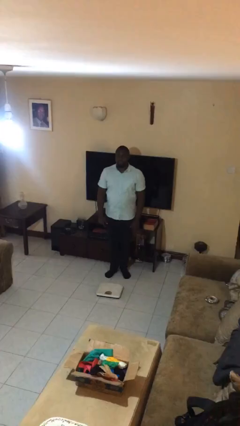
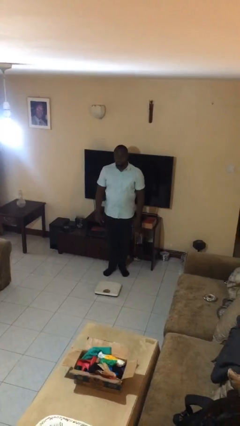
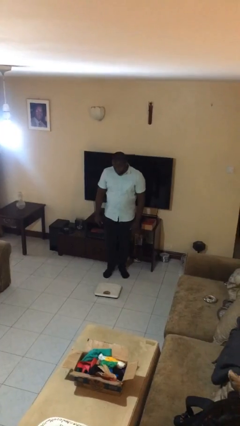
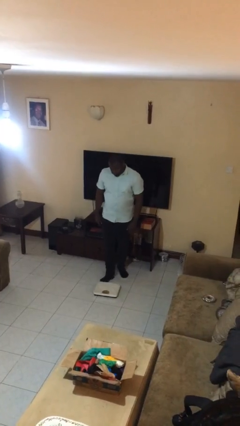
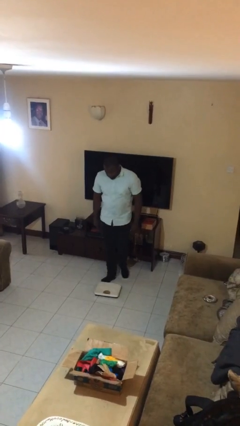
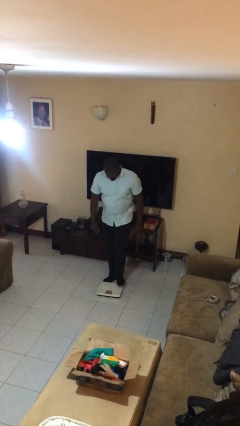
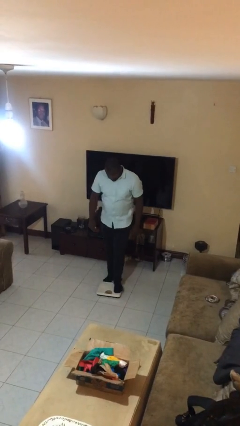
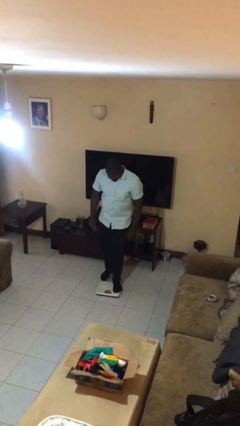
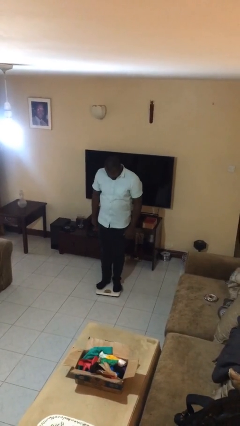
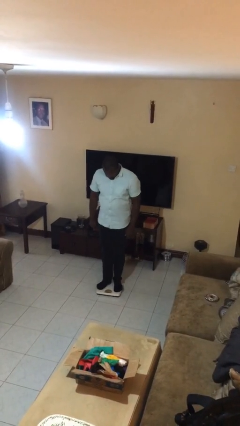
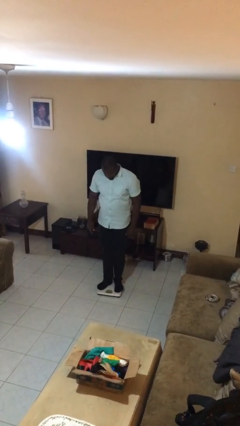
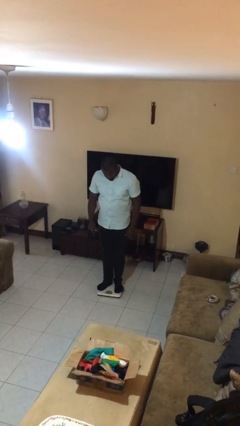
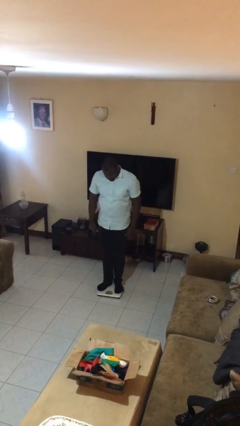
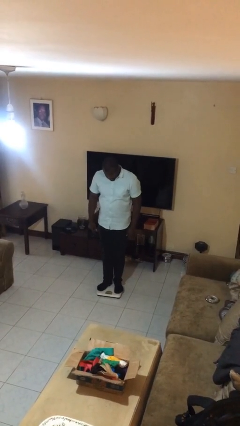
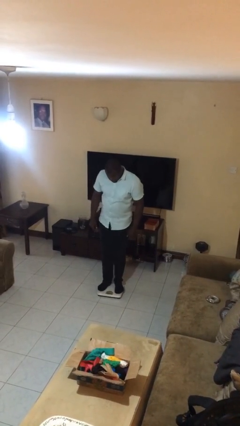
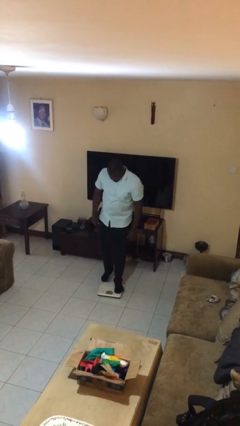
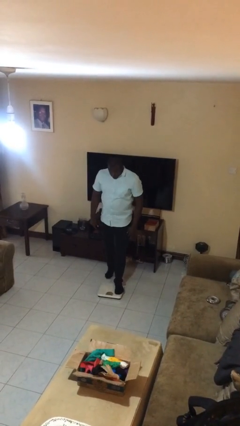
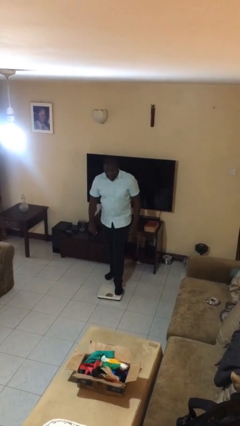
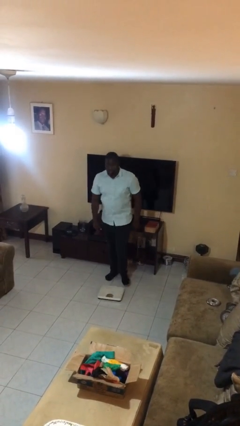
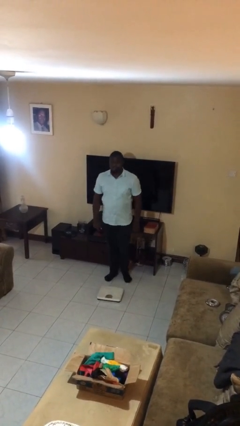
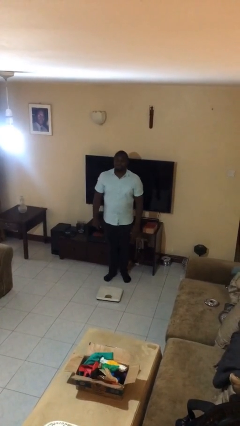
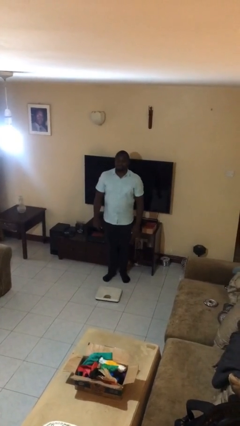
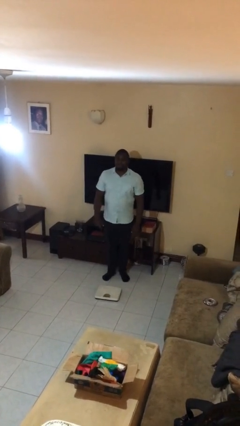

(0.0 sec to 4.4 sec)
person uses bodyweight scale

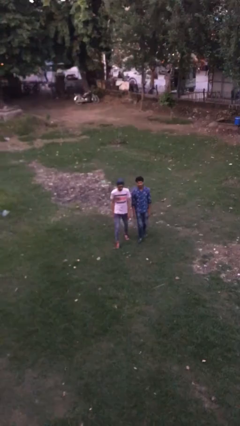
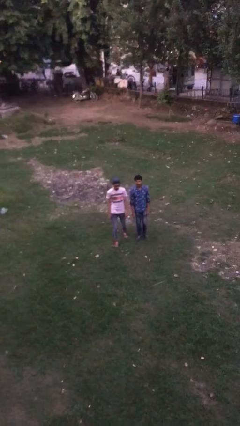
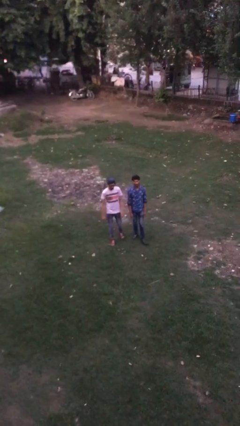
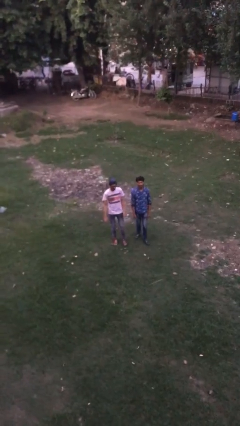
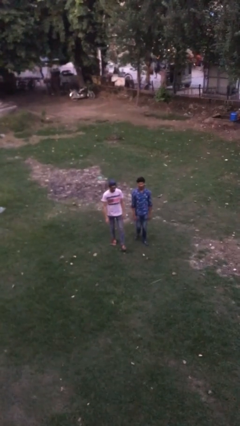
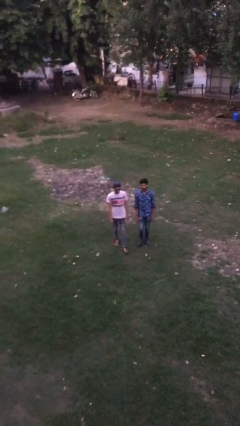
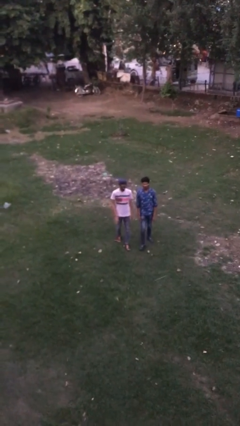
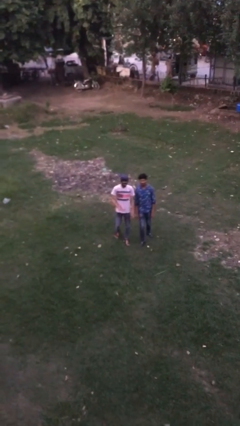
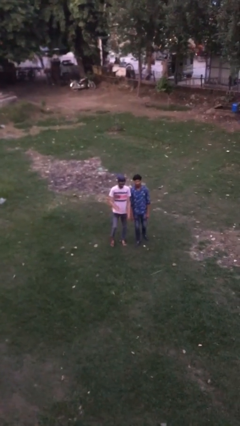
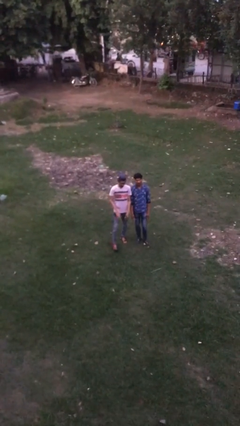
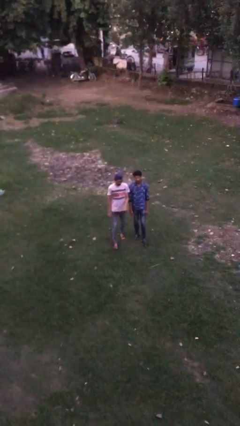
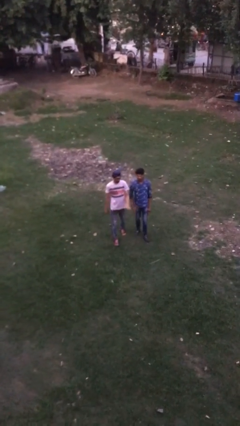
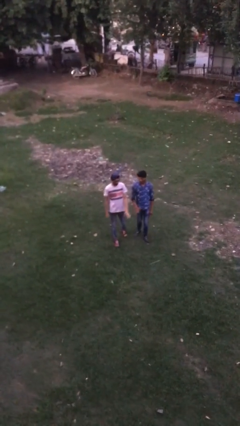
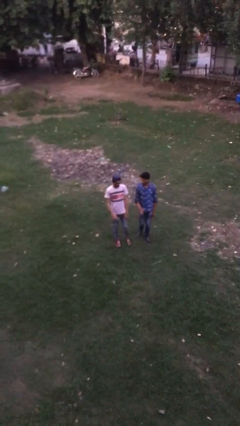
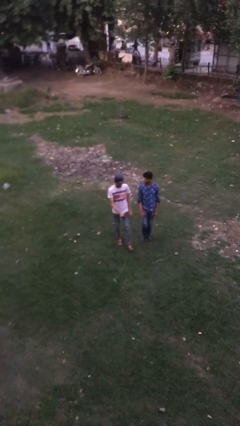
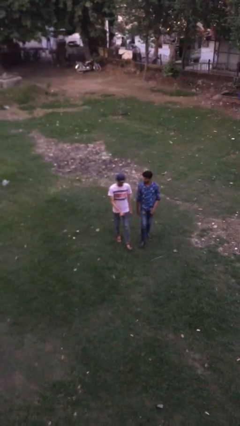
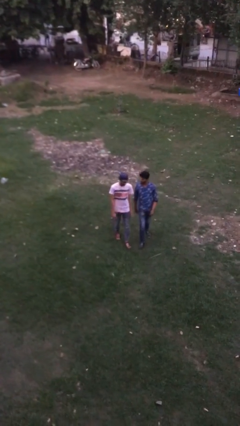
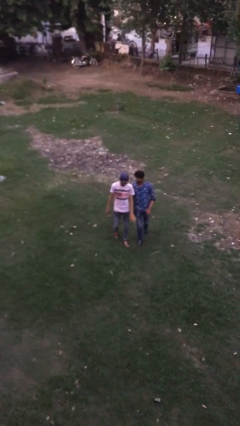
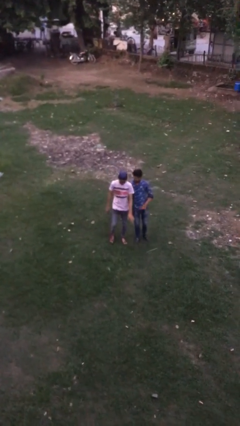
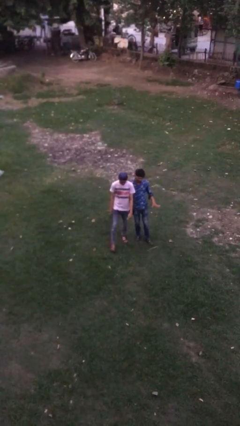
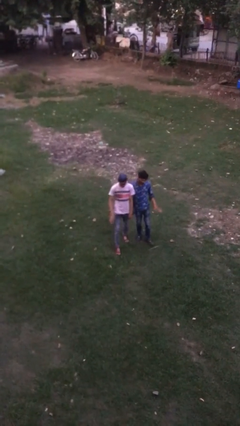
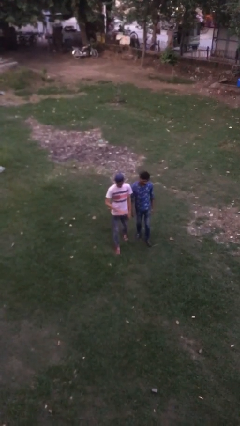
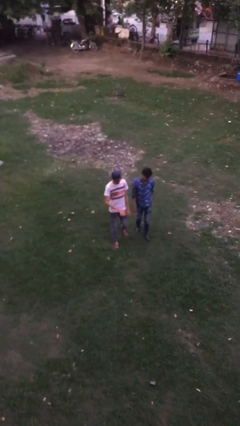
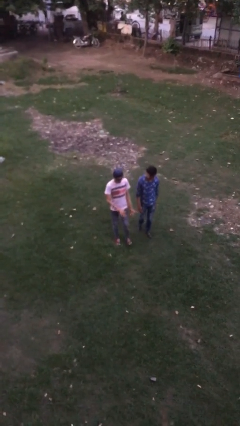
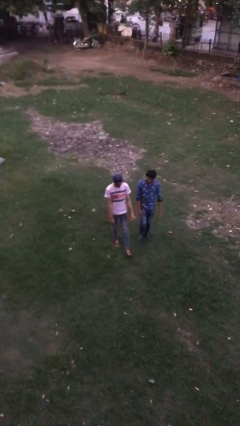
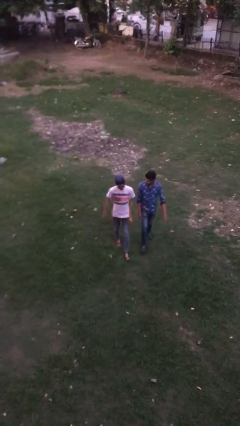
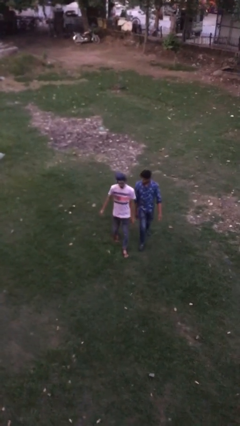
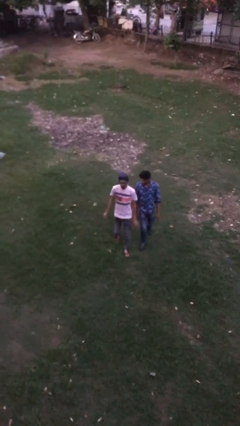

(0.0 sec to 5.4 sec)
person talks to person

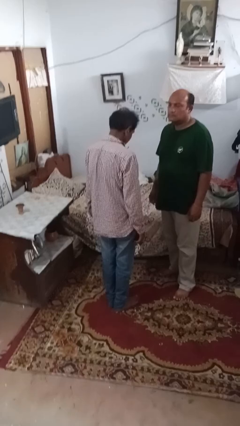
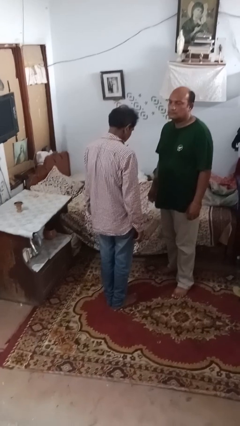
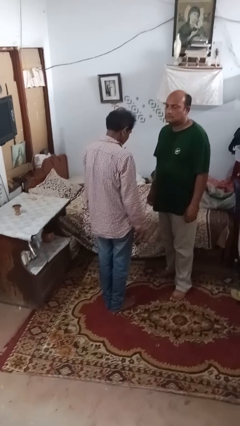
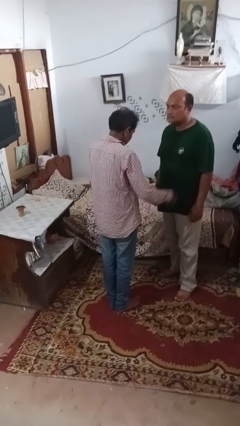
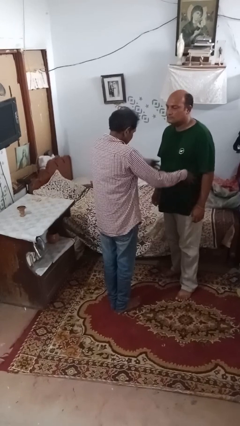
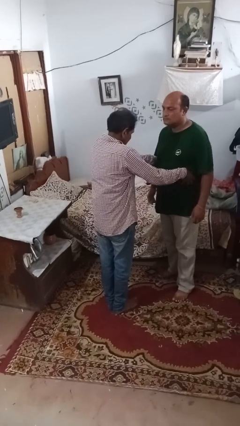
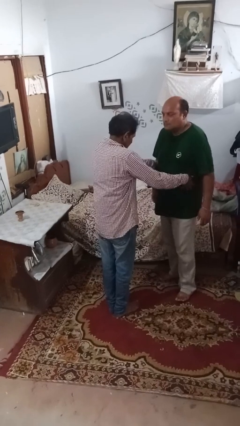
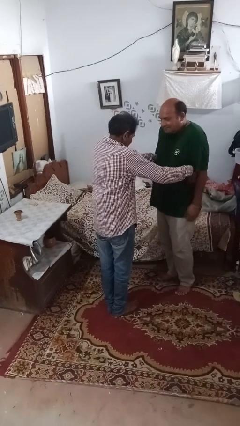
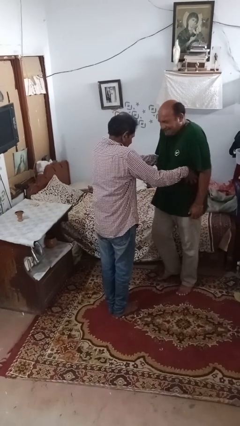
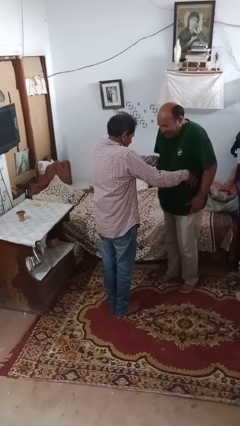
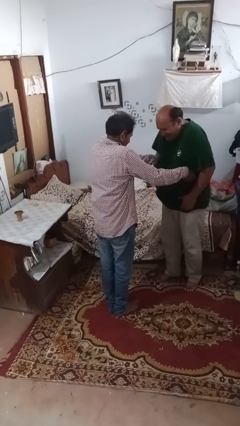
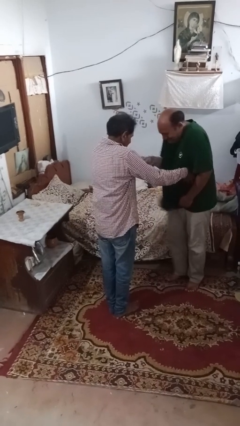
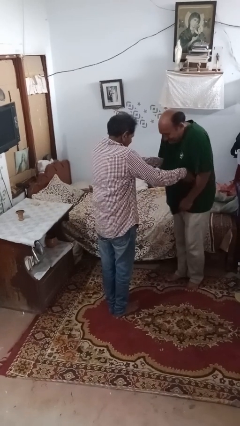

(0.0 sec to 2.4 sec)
person tickles person

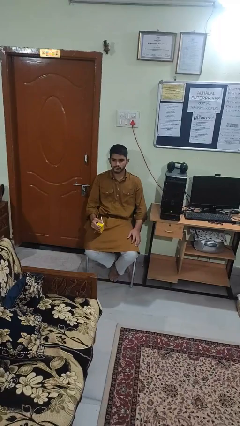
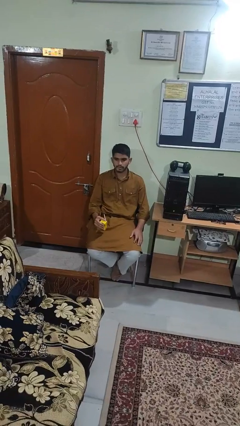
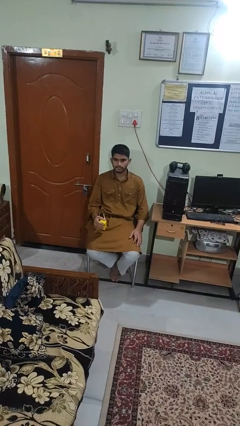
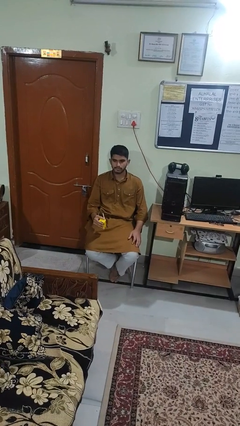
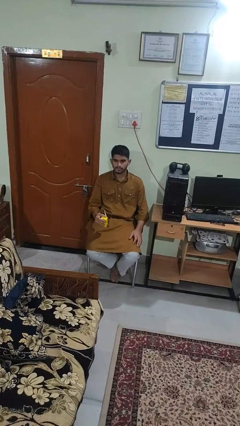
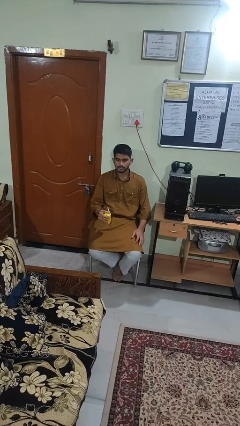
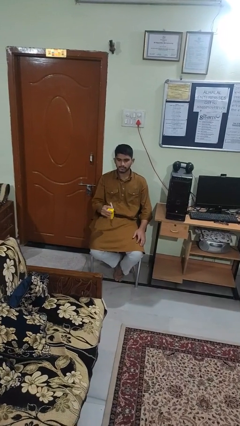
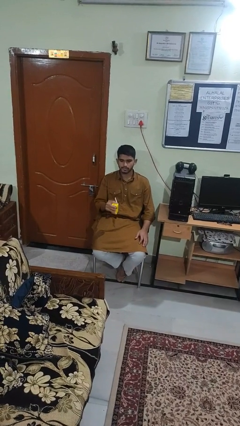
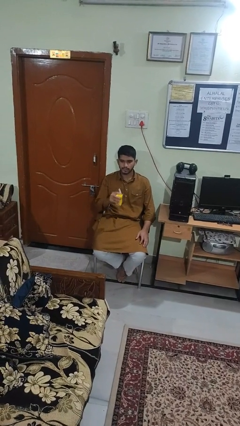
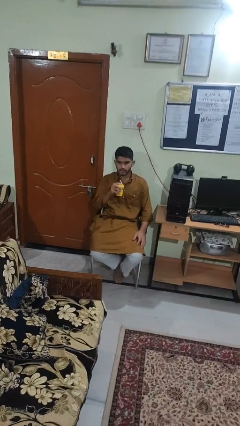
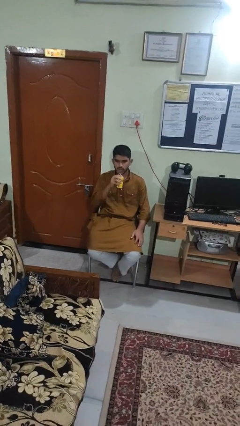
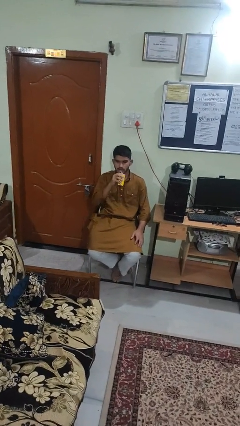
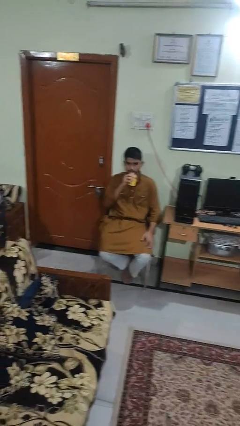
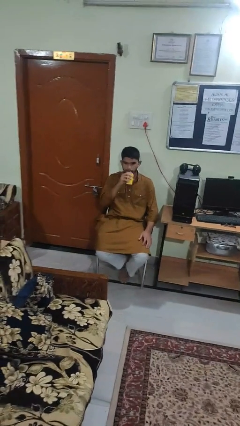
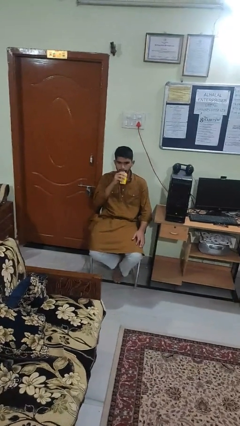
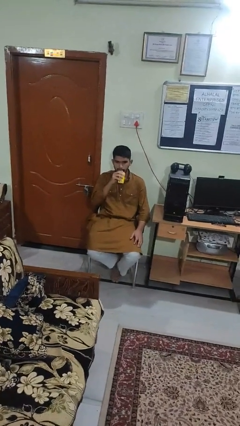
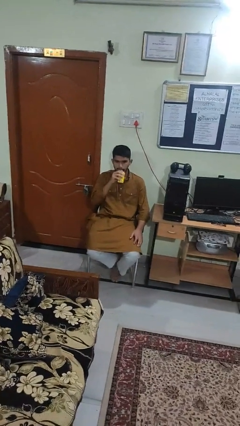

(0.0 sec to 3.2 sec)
person drinks from straw

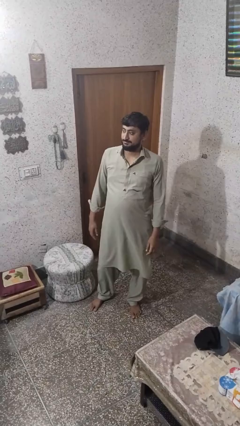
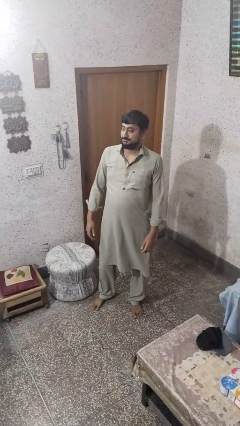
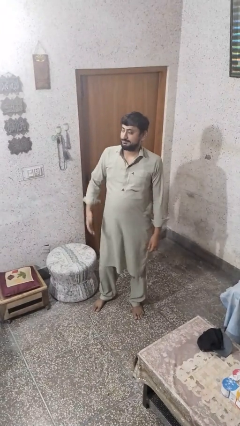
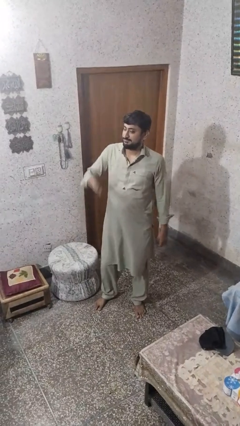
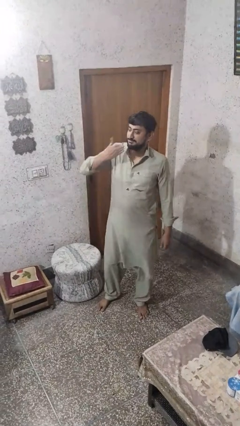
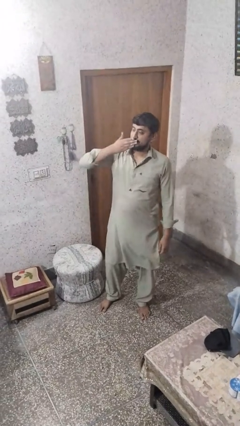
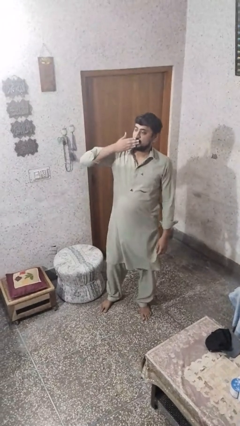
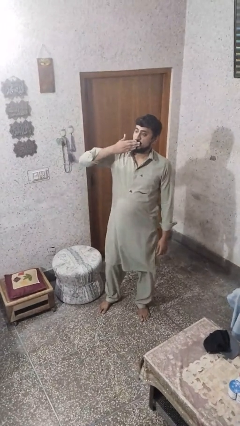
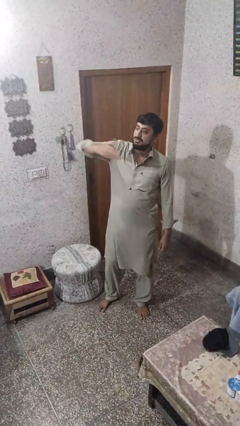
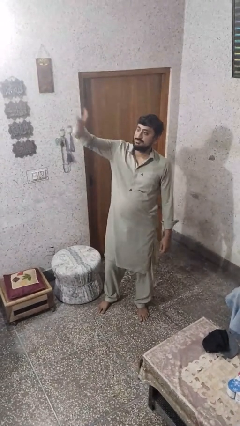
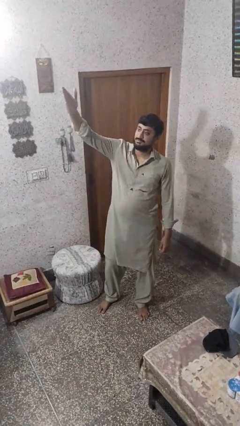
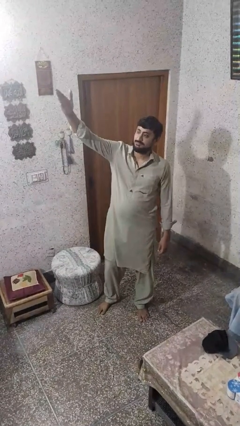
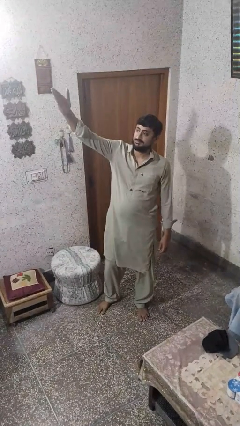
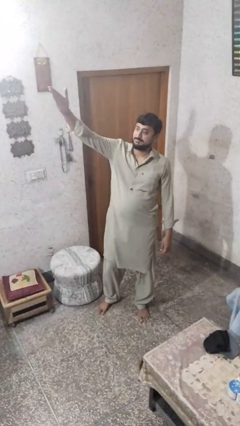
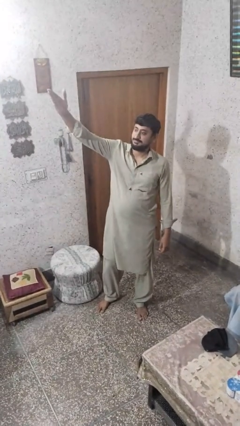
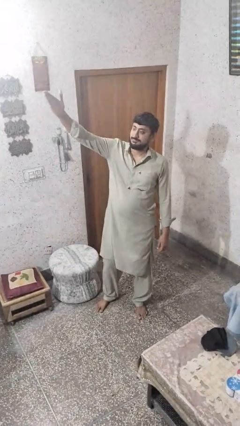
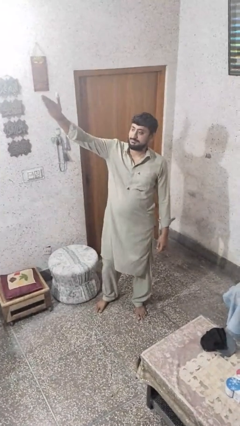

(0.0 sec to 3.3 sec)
person gestures blow kiss
